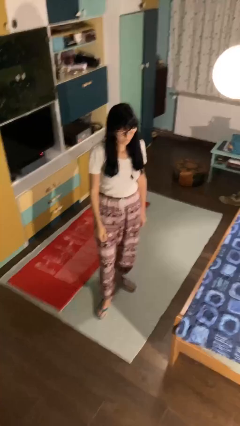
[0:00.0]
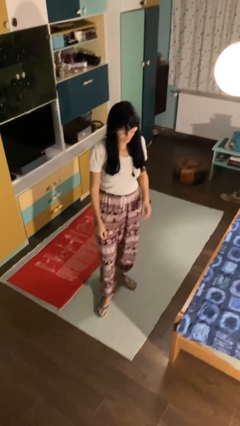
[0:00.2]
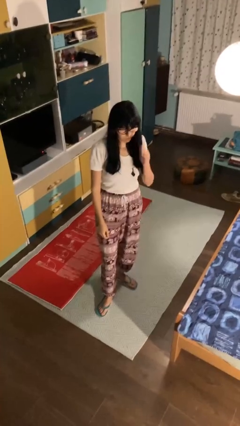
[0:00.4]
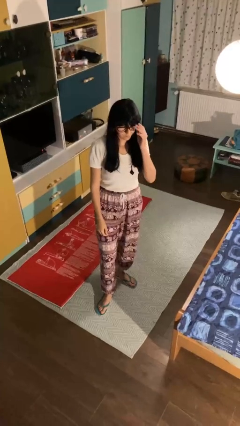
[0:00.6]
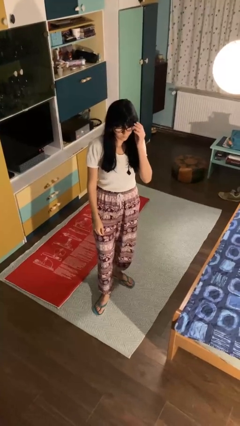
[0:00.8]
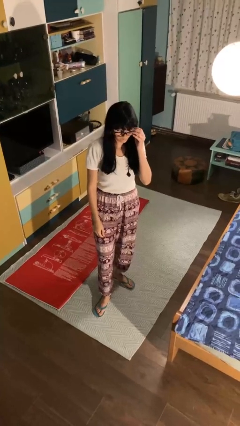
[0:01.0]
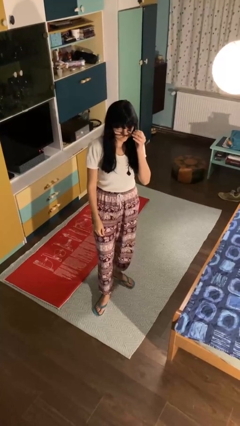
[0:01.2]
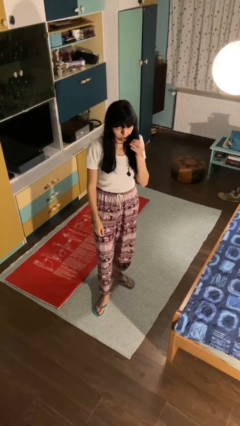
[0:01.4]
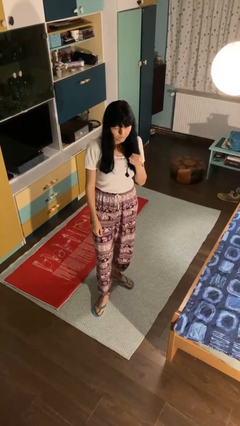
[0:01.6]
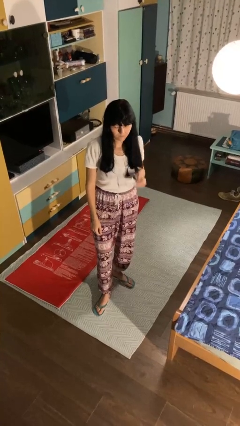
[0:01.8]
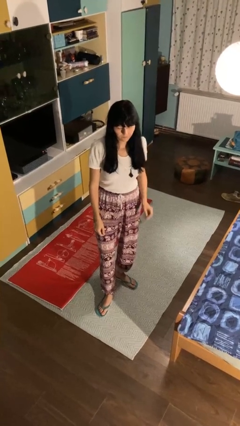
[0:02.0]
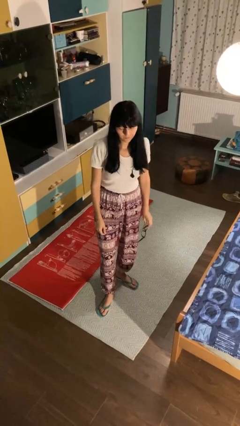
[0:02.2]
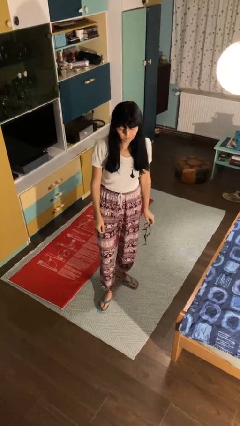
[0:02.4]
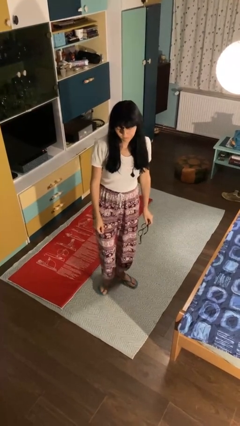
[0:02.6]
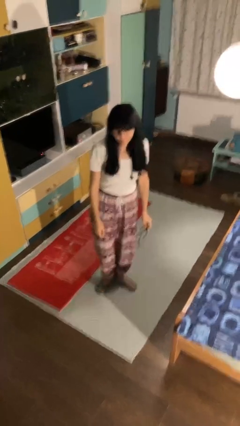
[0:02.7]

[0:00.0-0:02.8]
person takes off glasses

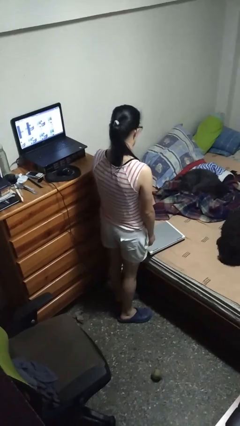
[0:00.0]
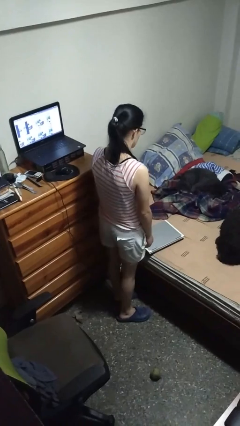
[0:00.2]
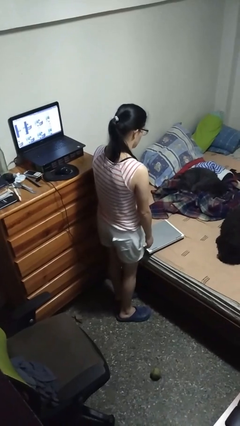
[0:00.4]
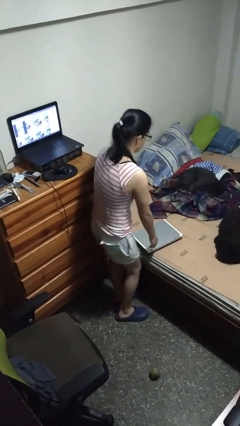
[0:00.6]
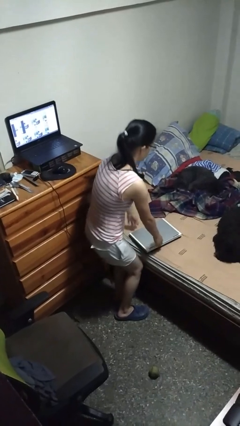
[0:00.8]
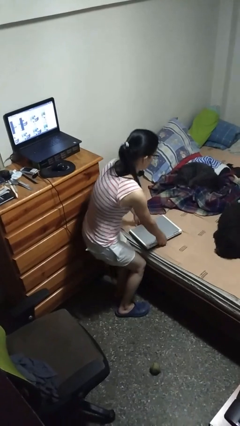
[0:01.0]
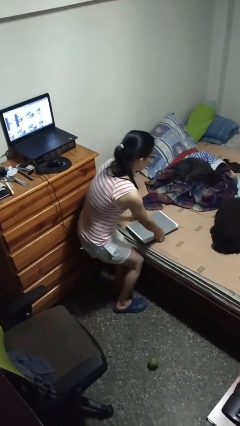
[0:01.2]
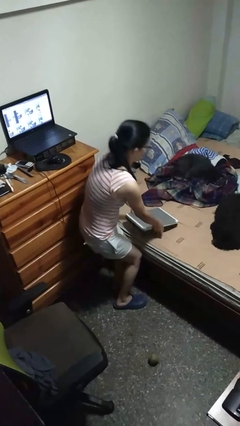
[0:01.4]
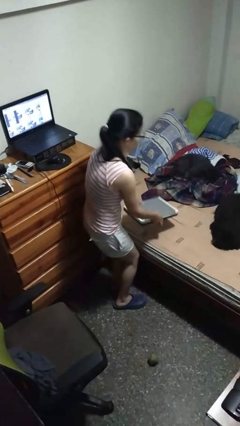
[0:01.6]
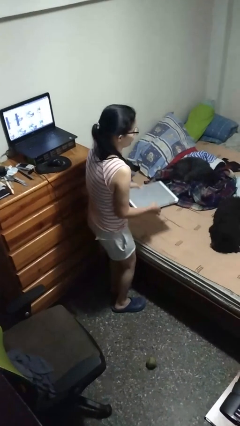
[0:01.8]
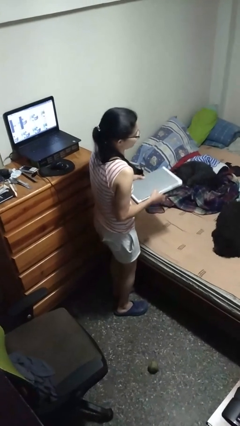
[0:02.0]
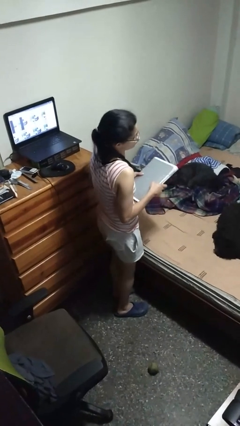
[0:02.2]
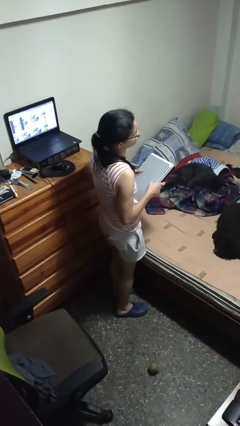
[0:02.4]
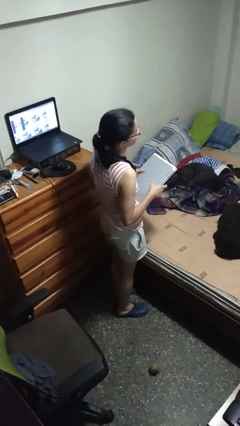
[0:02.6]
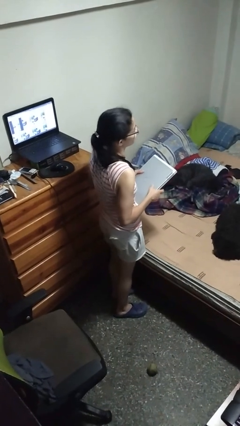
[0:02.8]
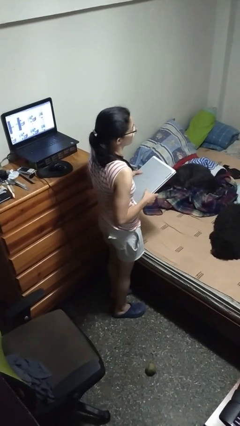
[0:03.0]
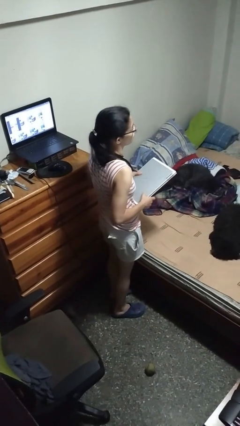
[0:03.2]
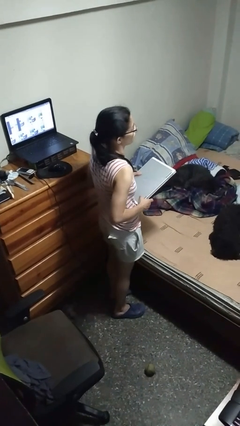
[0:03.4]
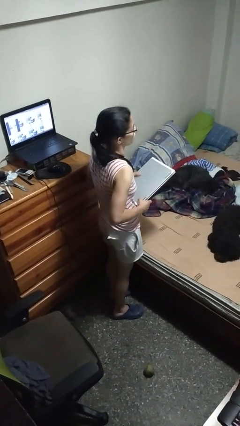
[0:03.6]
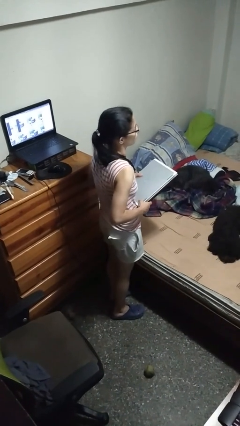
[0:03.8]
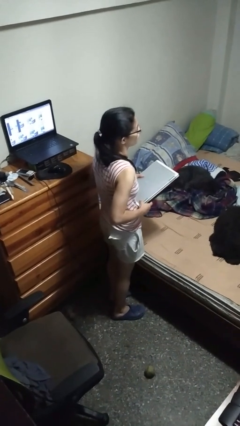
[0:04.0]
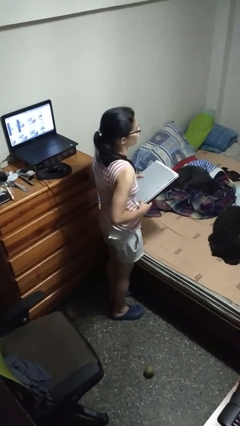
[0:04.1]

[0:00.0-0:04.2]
person picks up object from bed

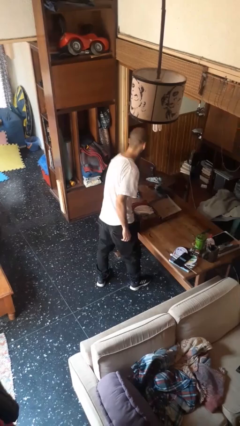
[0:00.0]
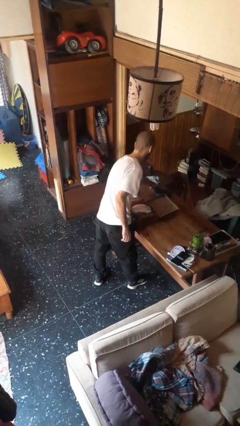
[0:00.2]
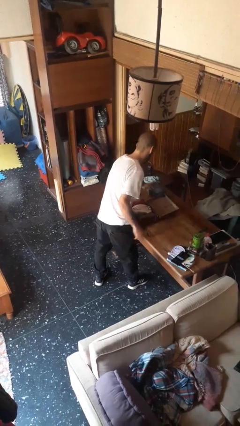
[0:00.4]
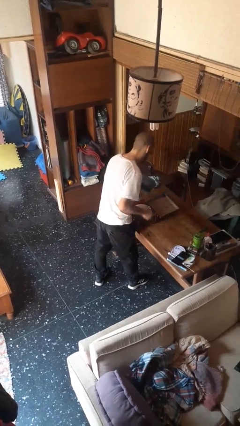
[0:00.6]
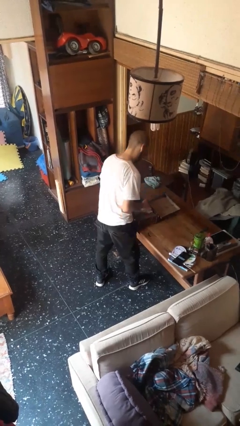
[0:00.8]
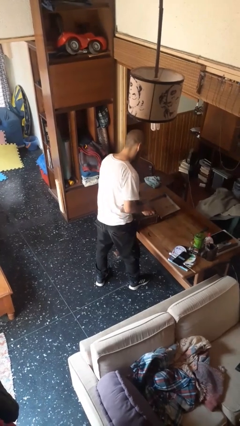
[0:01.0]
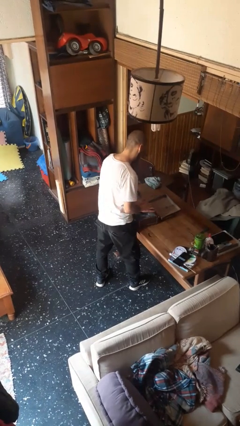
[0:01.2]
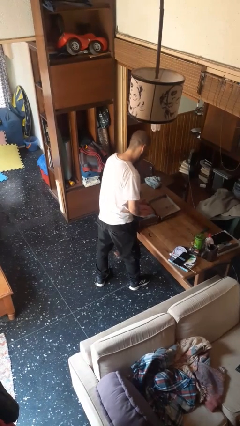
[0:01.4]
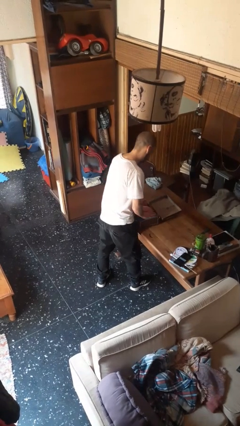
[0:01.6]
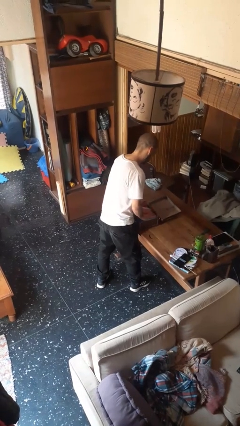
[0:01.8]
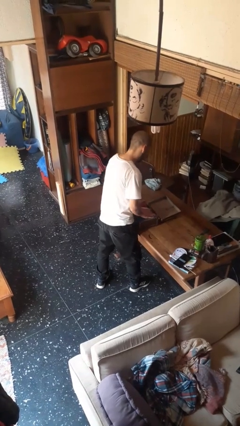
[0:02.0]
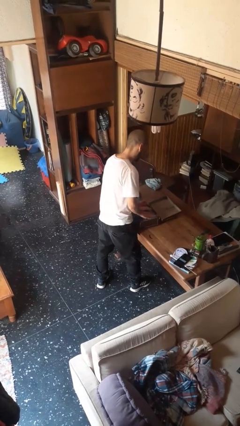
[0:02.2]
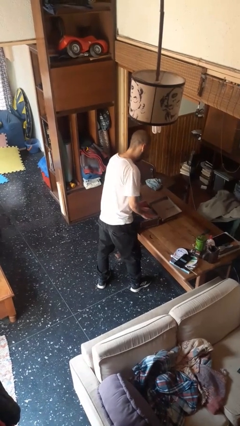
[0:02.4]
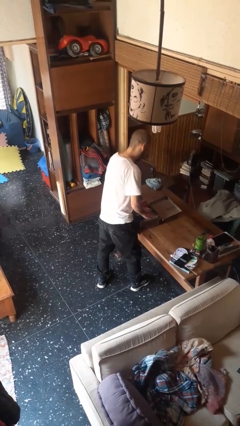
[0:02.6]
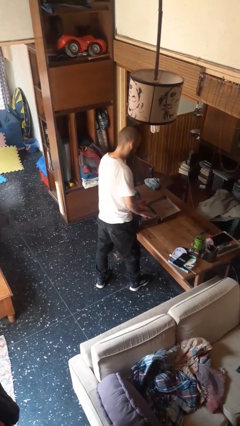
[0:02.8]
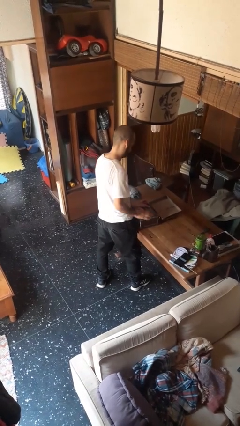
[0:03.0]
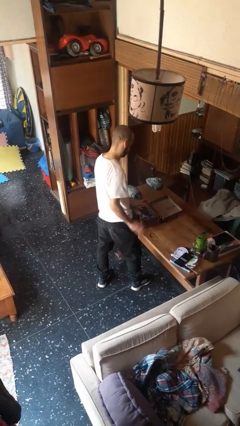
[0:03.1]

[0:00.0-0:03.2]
person loads clothes into suitcase

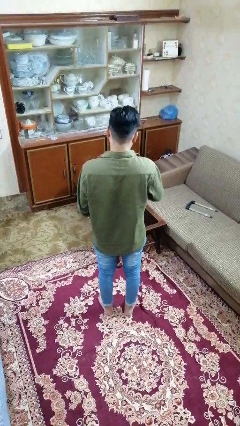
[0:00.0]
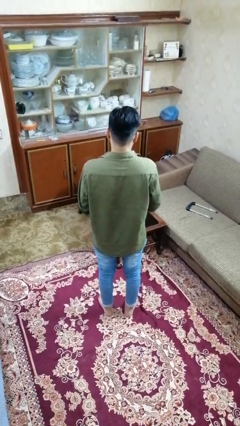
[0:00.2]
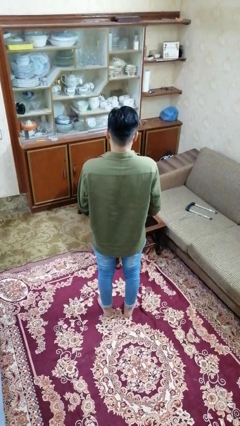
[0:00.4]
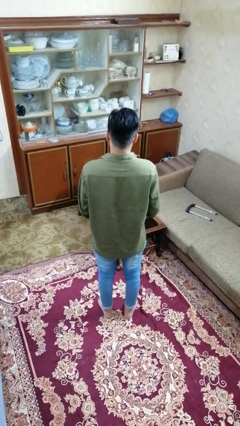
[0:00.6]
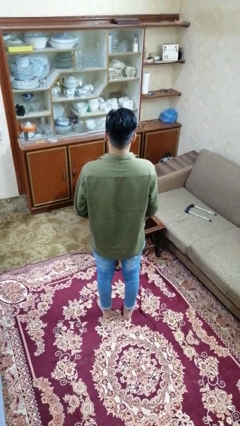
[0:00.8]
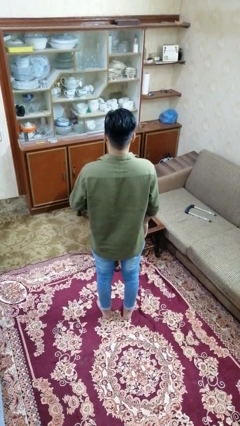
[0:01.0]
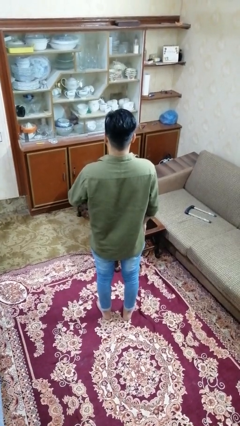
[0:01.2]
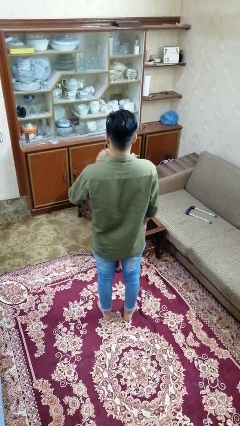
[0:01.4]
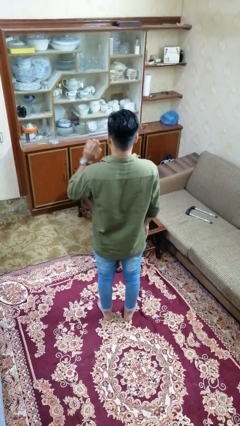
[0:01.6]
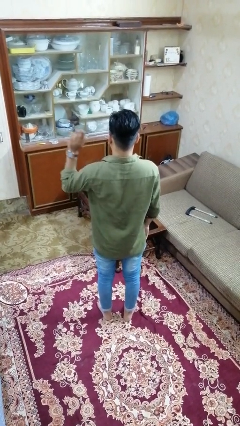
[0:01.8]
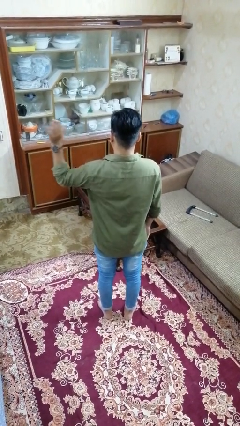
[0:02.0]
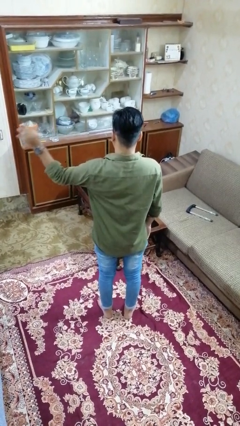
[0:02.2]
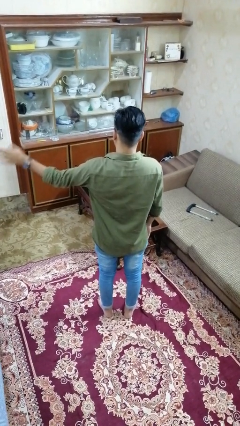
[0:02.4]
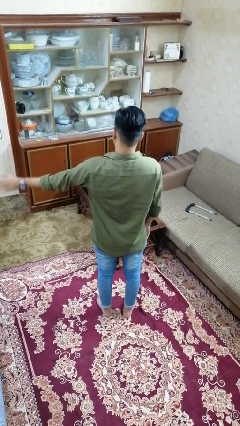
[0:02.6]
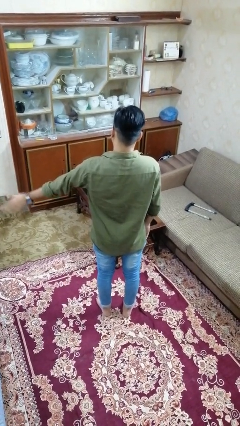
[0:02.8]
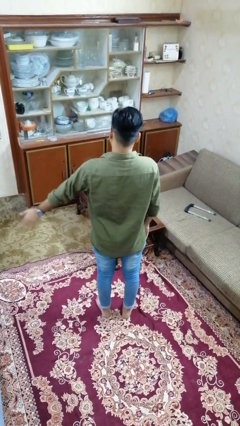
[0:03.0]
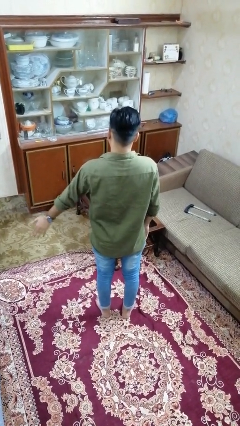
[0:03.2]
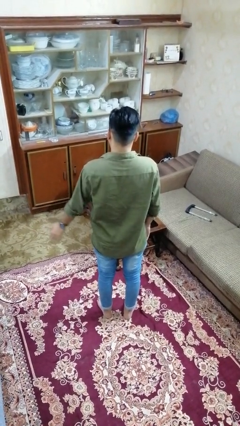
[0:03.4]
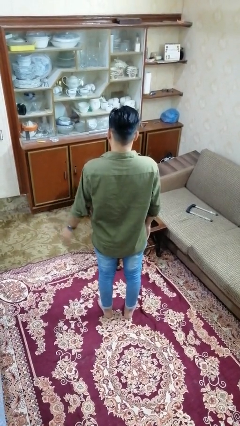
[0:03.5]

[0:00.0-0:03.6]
person gestures swipe left

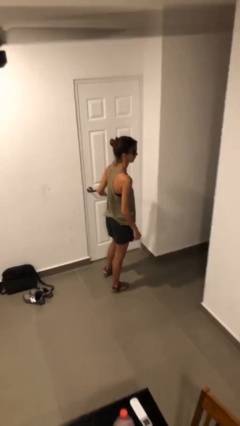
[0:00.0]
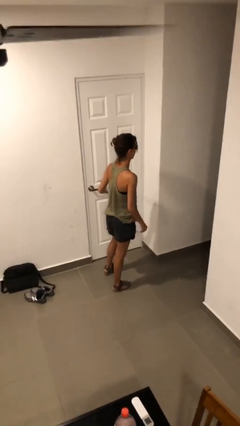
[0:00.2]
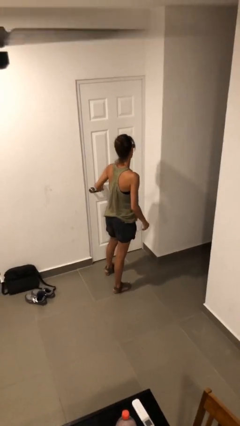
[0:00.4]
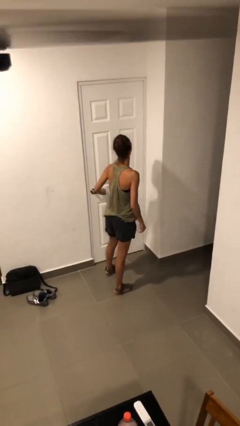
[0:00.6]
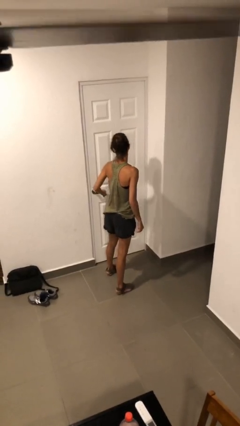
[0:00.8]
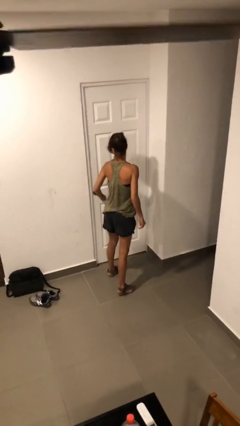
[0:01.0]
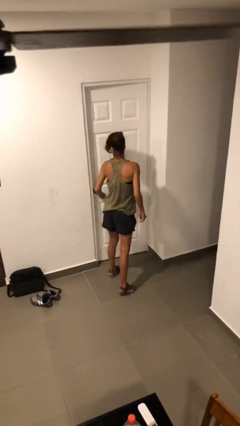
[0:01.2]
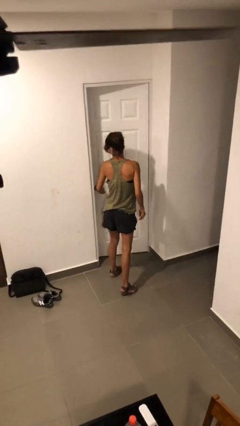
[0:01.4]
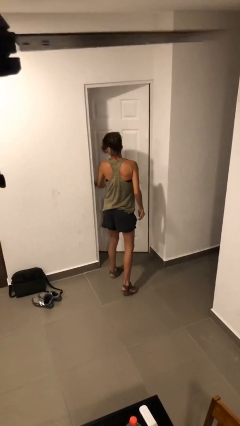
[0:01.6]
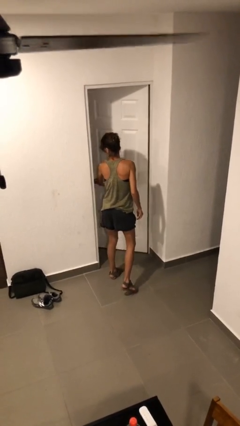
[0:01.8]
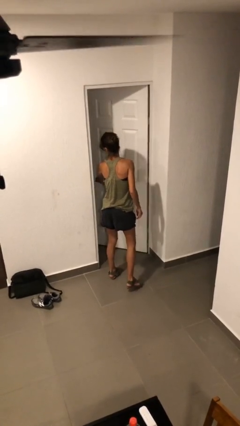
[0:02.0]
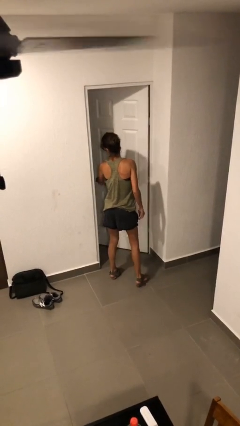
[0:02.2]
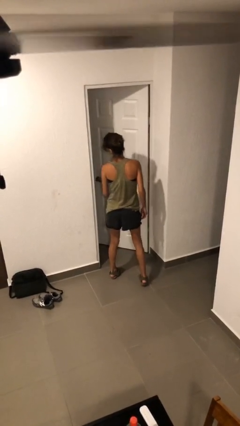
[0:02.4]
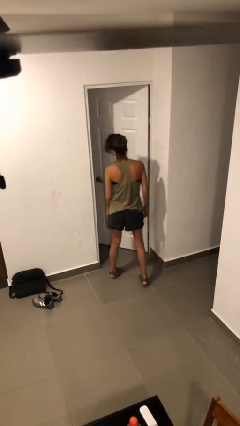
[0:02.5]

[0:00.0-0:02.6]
person opens facility door

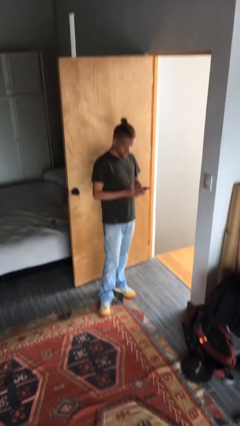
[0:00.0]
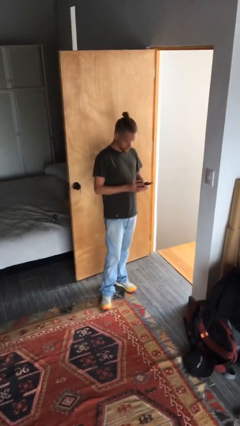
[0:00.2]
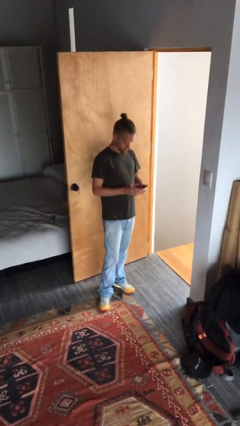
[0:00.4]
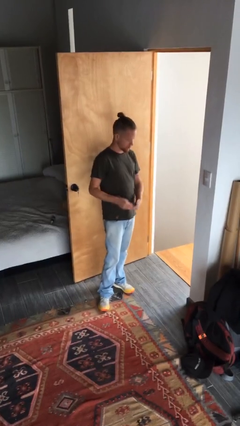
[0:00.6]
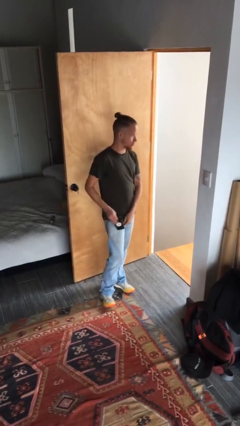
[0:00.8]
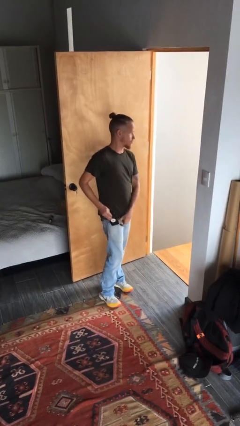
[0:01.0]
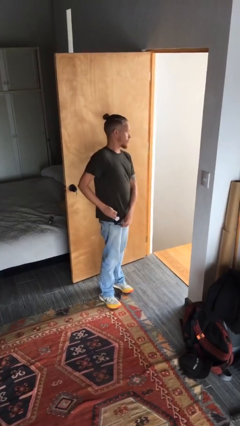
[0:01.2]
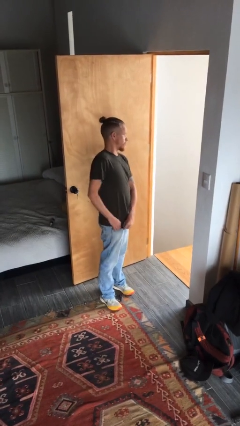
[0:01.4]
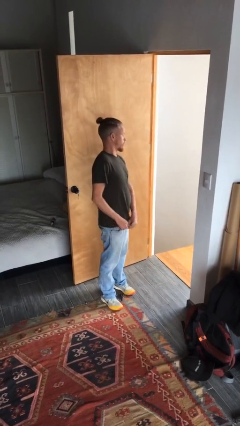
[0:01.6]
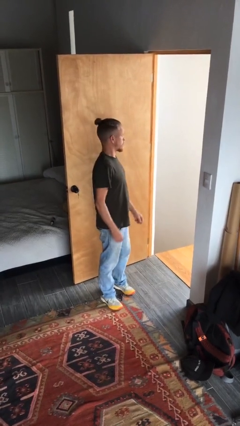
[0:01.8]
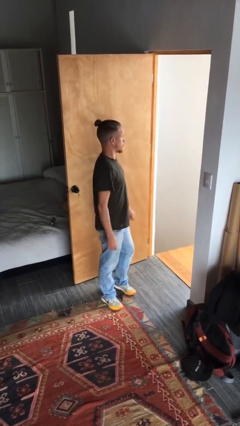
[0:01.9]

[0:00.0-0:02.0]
person puts phone into pocket
